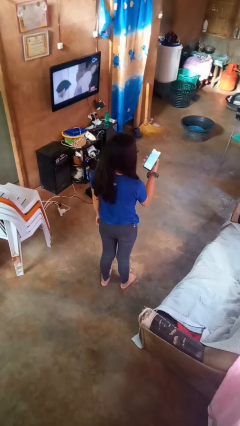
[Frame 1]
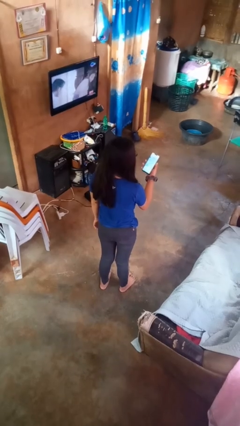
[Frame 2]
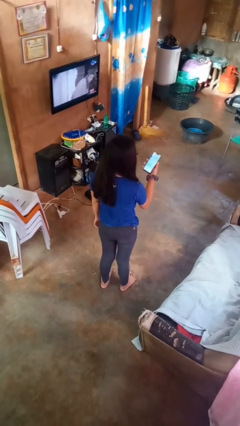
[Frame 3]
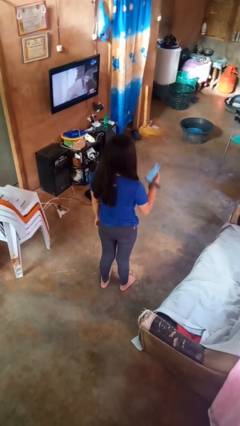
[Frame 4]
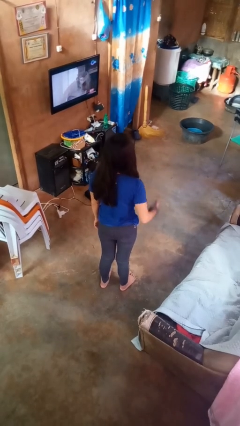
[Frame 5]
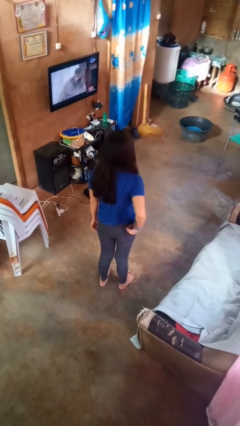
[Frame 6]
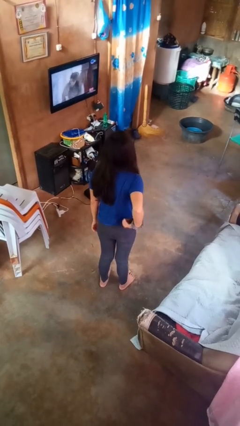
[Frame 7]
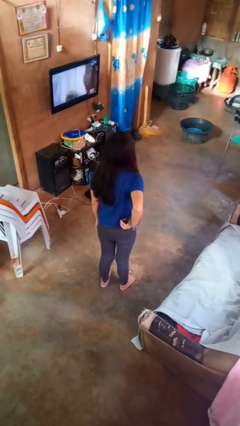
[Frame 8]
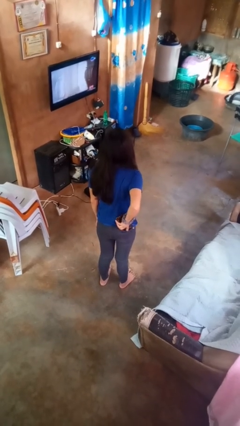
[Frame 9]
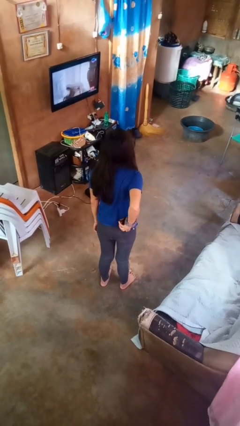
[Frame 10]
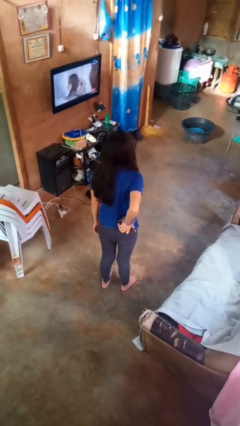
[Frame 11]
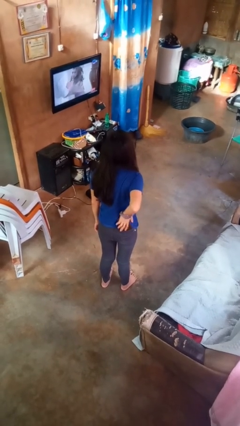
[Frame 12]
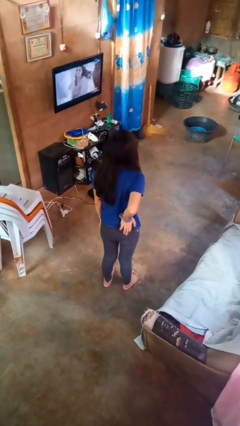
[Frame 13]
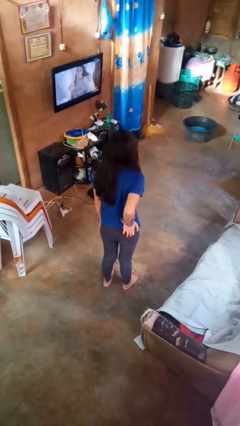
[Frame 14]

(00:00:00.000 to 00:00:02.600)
person puts phone into pocket

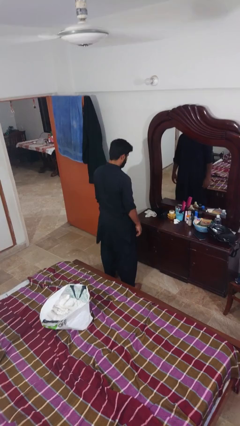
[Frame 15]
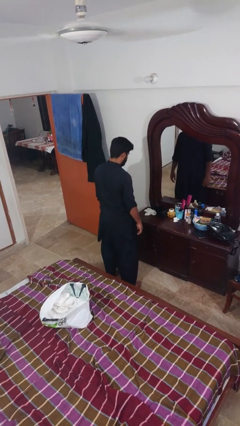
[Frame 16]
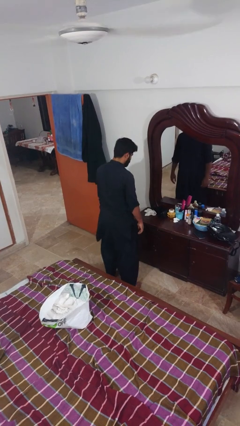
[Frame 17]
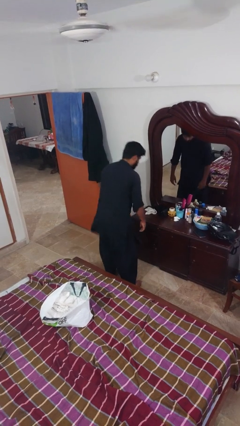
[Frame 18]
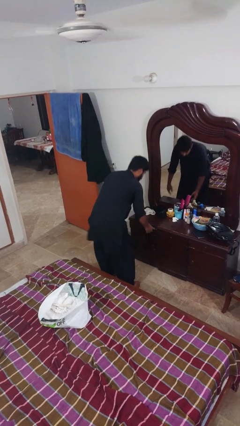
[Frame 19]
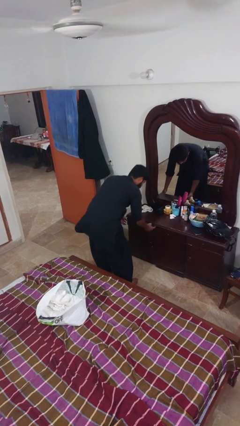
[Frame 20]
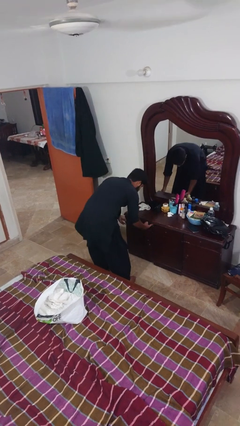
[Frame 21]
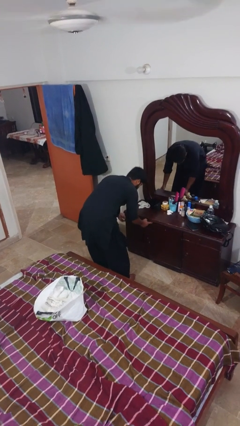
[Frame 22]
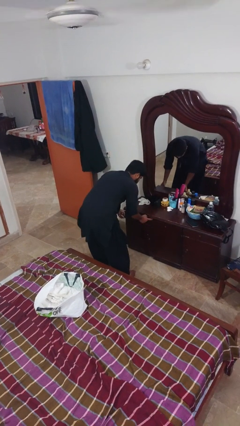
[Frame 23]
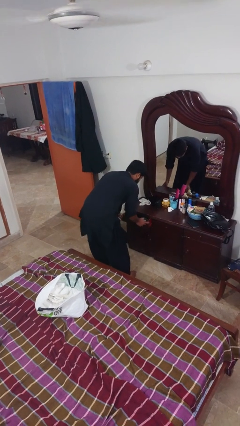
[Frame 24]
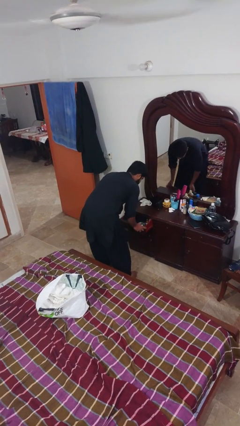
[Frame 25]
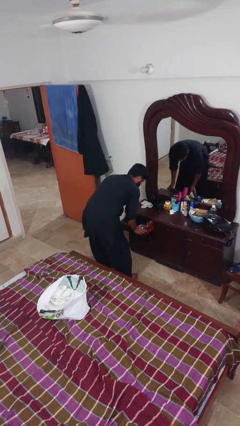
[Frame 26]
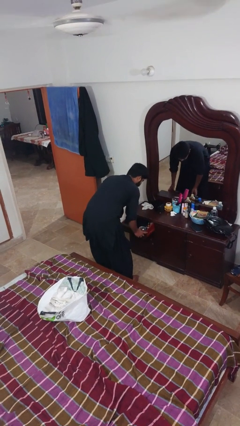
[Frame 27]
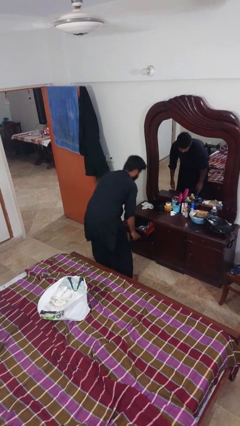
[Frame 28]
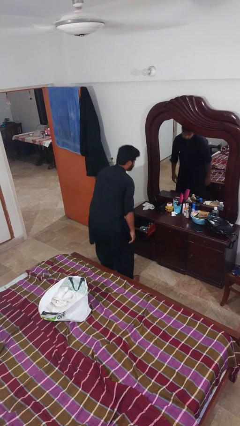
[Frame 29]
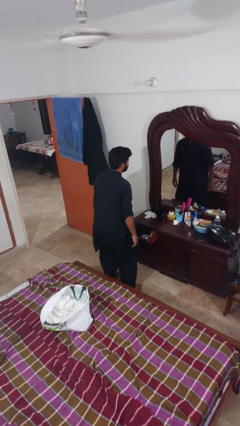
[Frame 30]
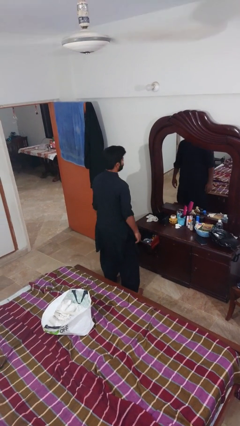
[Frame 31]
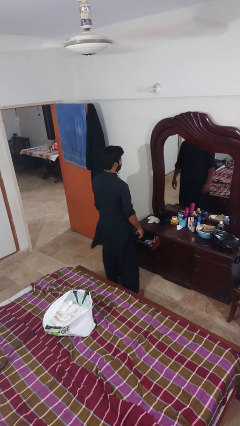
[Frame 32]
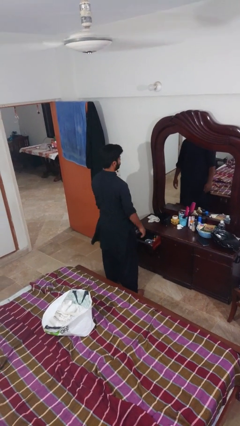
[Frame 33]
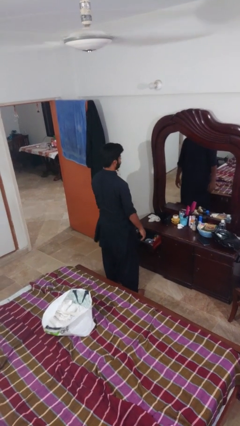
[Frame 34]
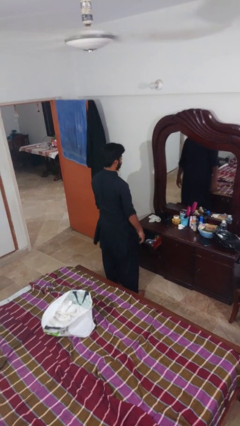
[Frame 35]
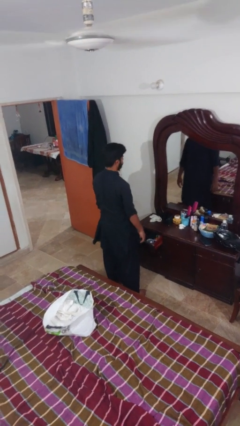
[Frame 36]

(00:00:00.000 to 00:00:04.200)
person opens dresser drawer

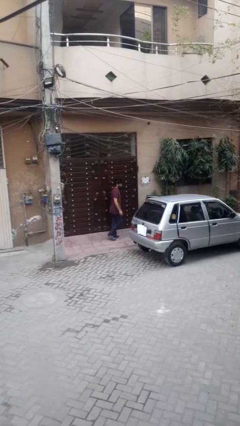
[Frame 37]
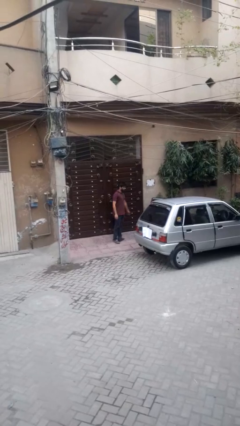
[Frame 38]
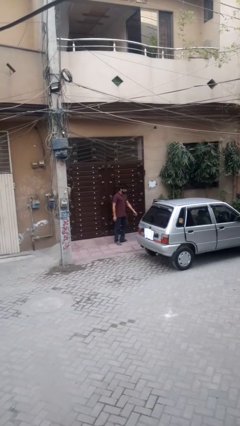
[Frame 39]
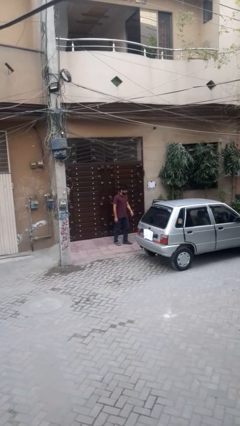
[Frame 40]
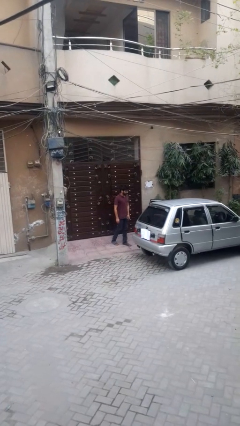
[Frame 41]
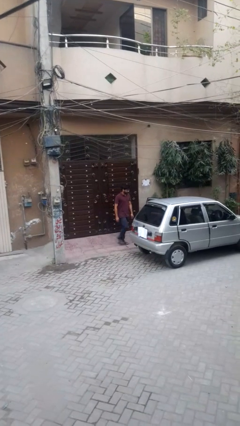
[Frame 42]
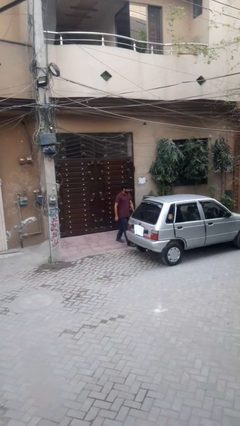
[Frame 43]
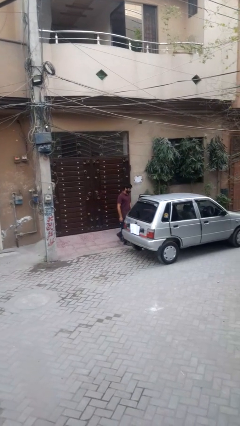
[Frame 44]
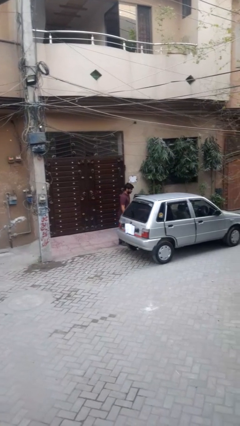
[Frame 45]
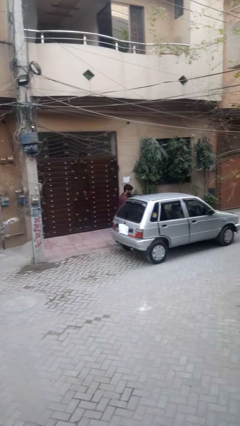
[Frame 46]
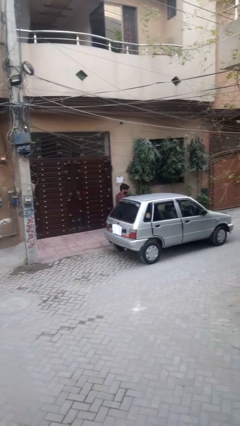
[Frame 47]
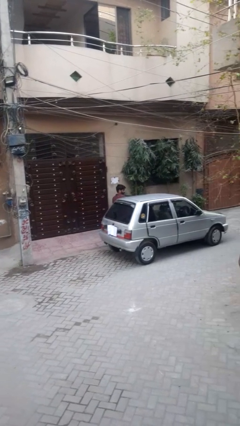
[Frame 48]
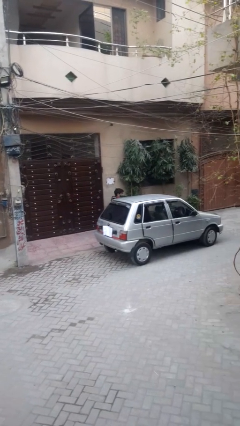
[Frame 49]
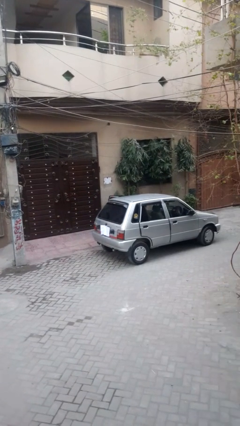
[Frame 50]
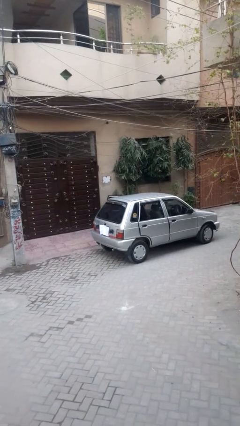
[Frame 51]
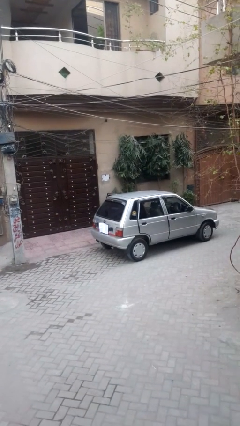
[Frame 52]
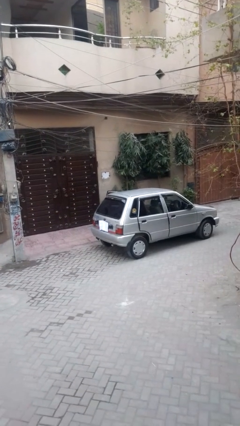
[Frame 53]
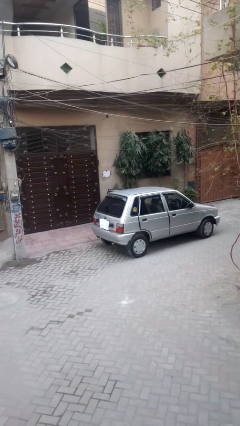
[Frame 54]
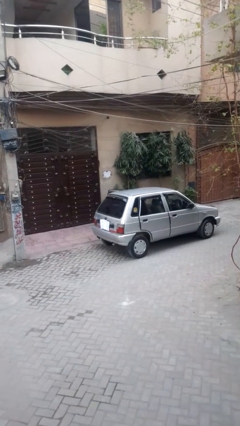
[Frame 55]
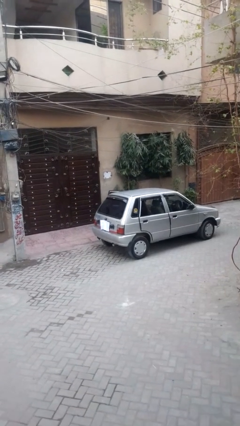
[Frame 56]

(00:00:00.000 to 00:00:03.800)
person enters car

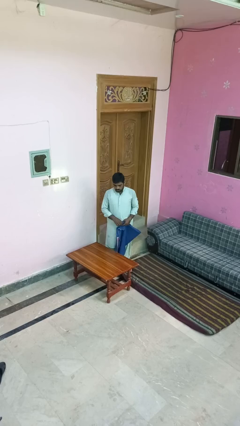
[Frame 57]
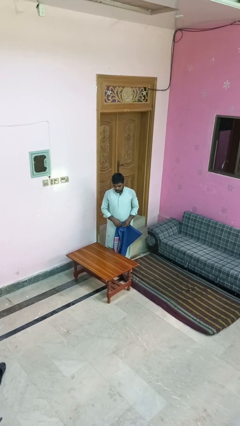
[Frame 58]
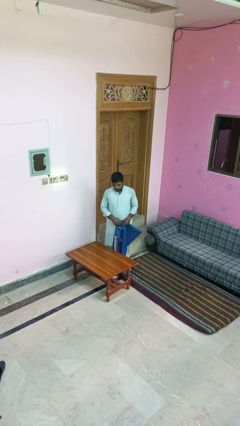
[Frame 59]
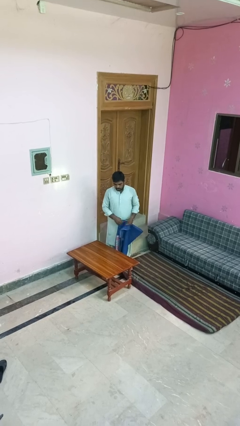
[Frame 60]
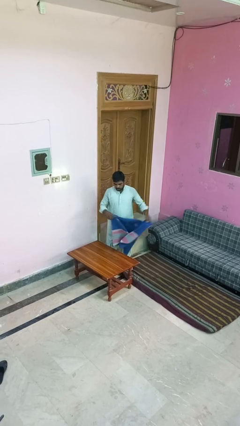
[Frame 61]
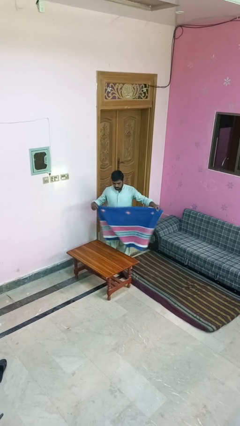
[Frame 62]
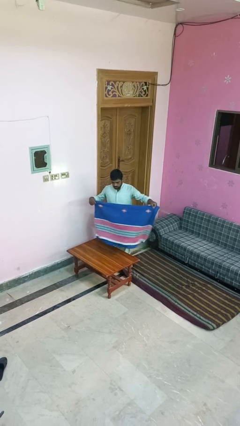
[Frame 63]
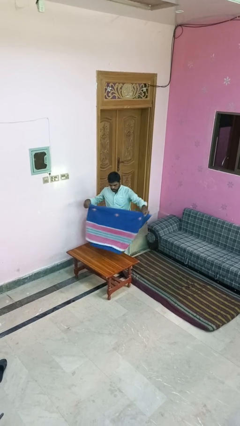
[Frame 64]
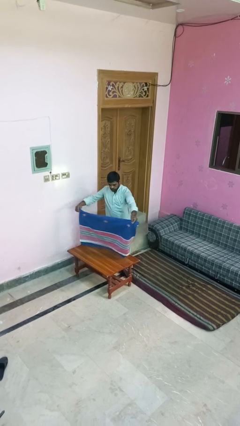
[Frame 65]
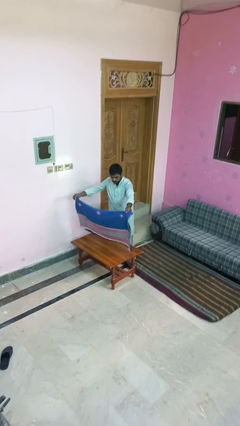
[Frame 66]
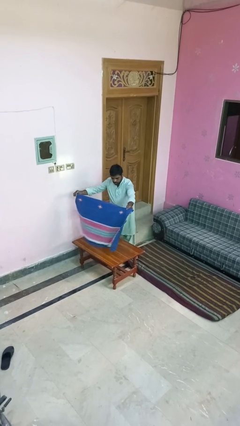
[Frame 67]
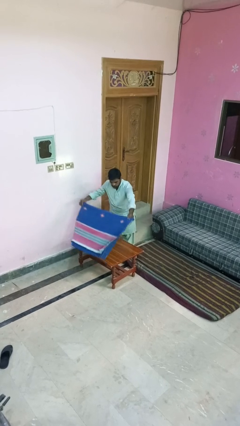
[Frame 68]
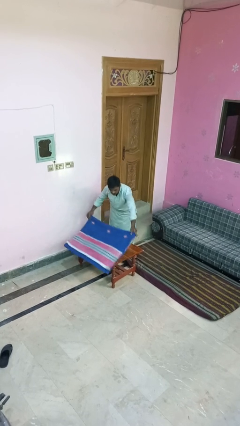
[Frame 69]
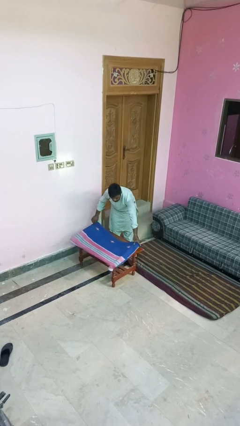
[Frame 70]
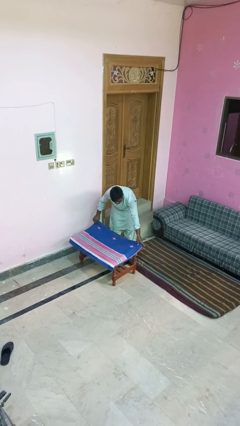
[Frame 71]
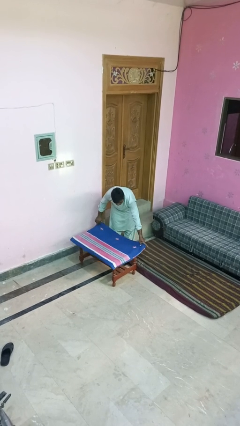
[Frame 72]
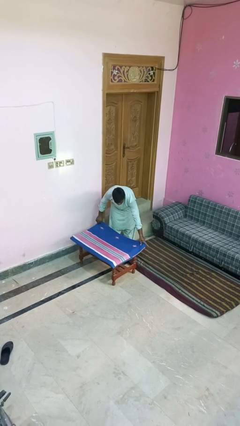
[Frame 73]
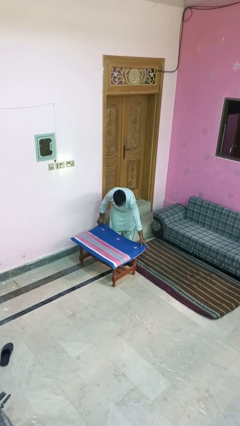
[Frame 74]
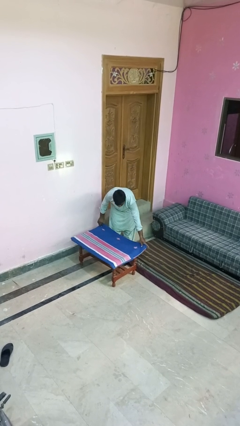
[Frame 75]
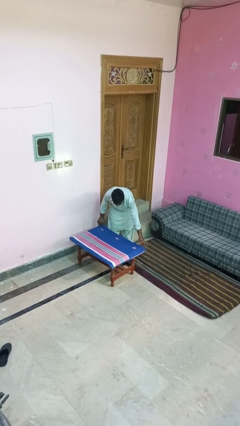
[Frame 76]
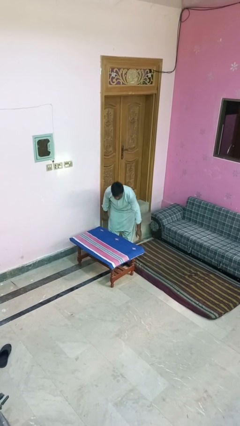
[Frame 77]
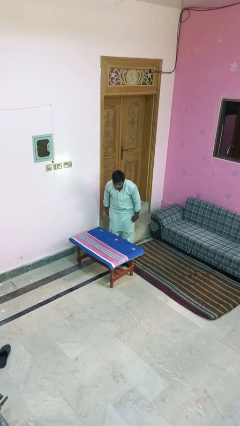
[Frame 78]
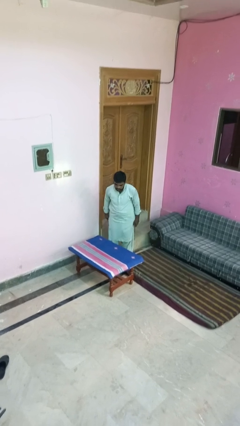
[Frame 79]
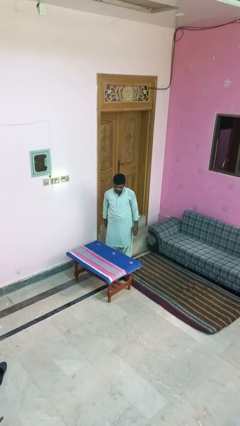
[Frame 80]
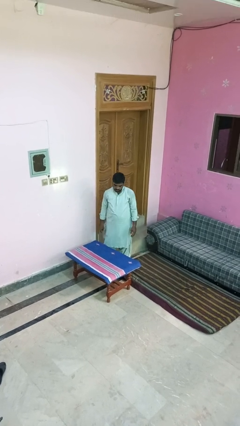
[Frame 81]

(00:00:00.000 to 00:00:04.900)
person spreads tablecloth

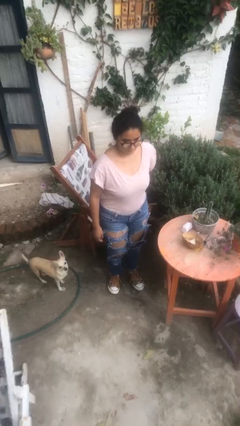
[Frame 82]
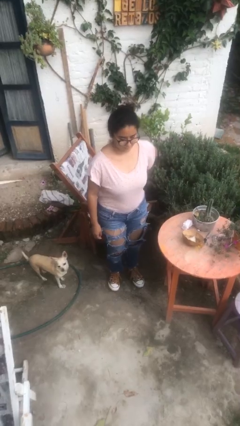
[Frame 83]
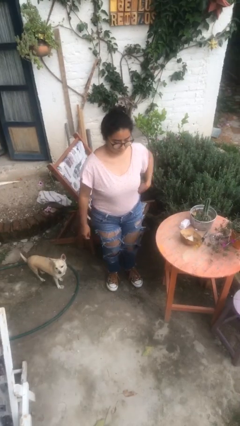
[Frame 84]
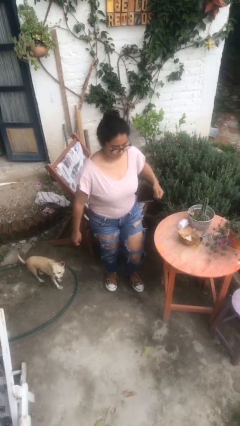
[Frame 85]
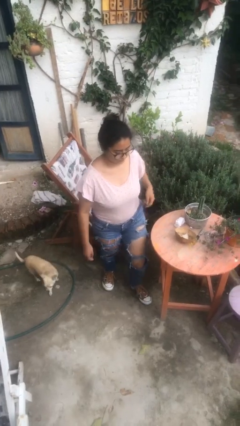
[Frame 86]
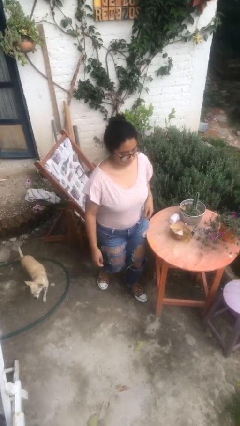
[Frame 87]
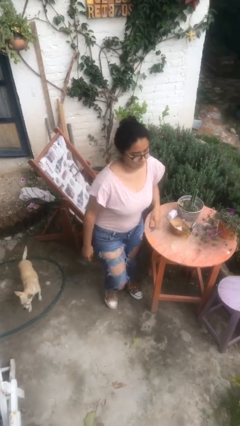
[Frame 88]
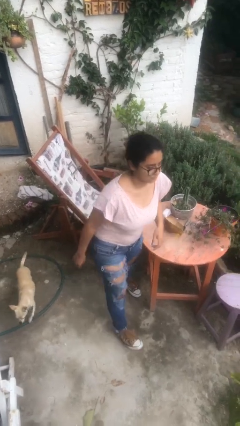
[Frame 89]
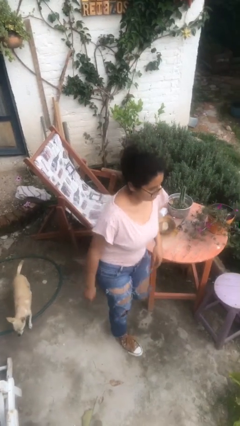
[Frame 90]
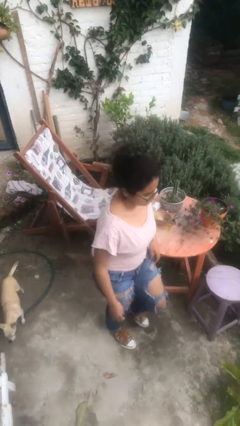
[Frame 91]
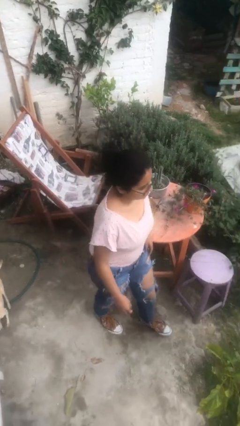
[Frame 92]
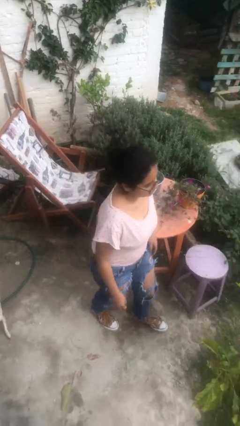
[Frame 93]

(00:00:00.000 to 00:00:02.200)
person bumps into table
